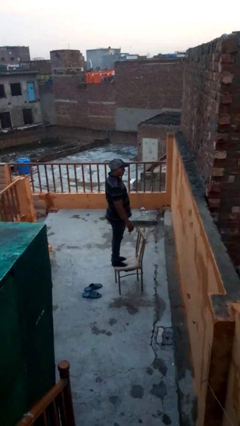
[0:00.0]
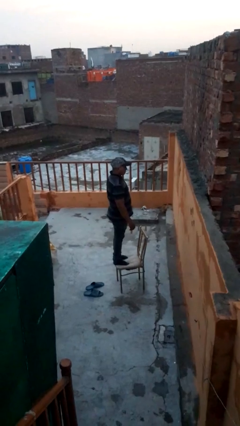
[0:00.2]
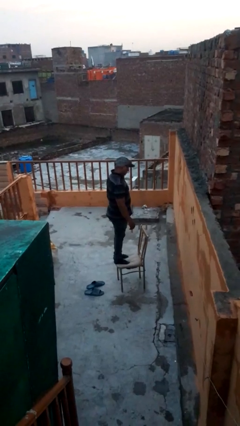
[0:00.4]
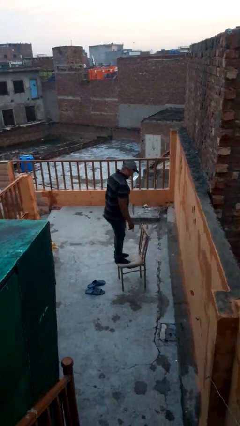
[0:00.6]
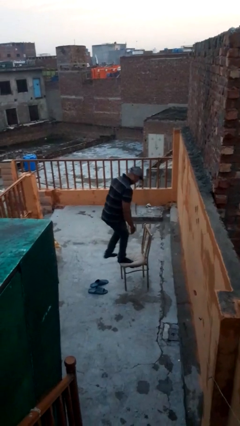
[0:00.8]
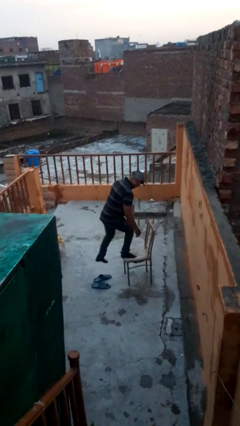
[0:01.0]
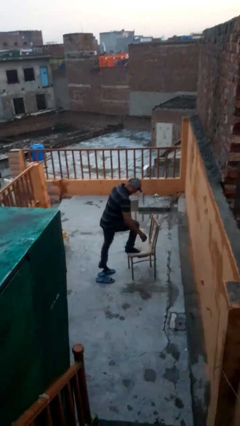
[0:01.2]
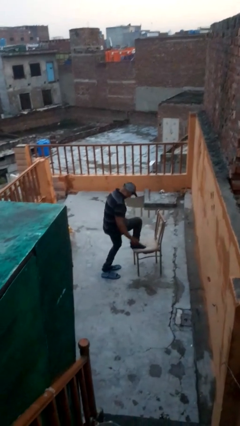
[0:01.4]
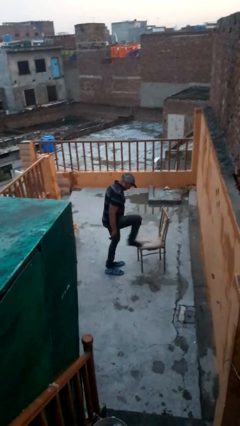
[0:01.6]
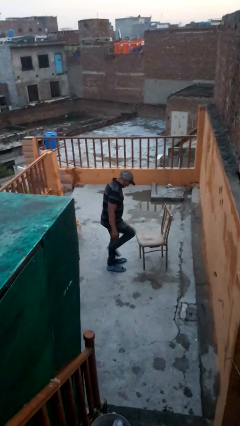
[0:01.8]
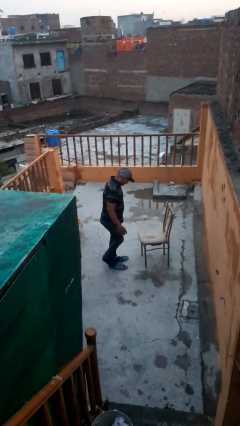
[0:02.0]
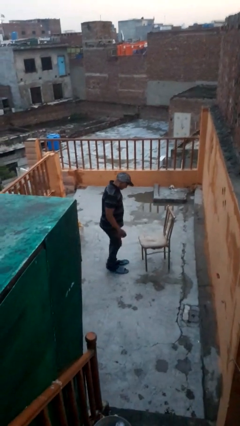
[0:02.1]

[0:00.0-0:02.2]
person climbs off chair

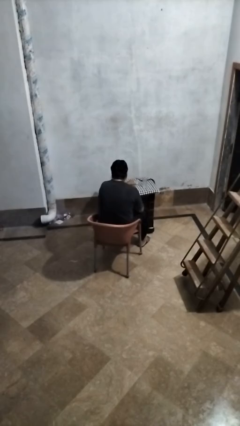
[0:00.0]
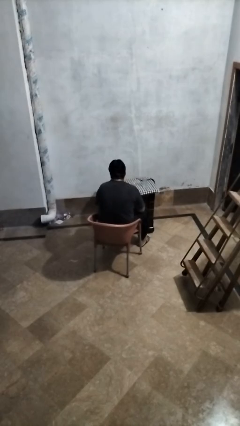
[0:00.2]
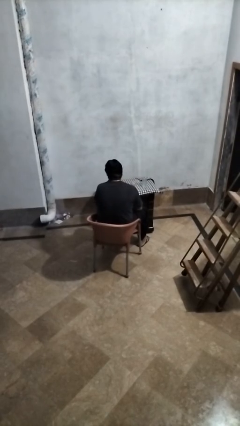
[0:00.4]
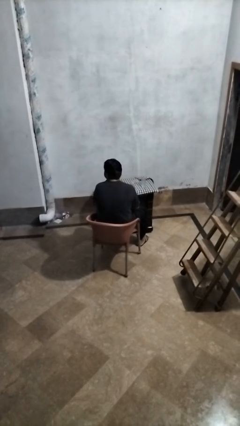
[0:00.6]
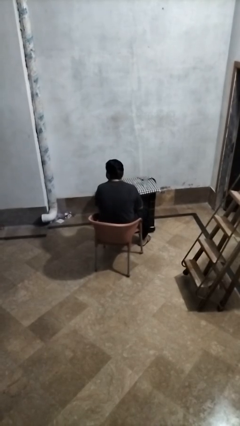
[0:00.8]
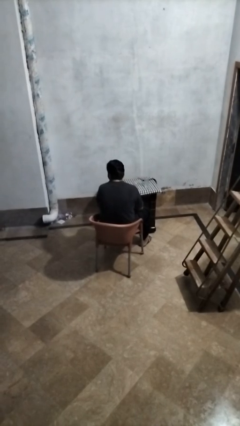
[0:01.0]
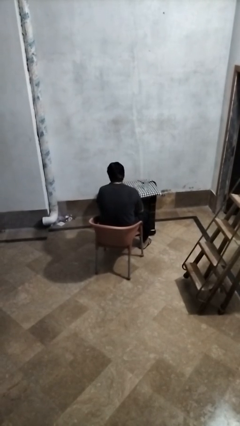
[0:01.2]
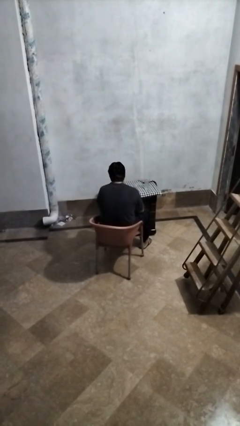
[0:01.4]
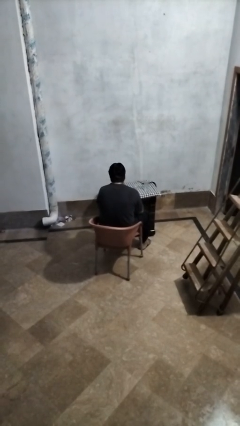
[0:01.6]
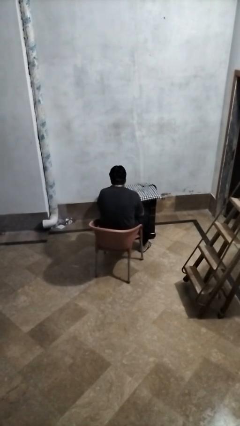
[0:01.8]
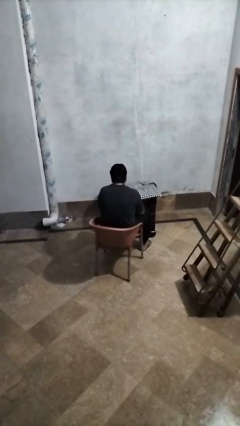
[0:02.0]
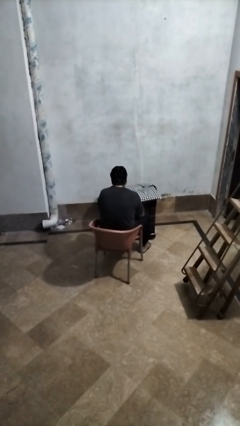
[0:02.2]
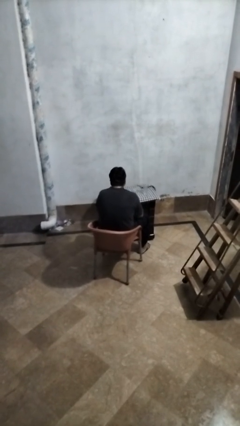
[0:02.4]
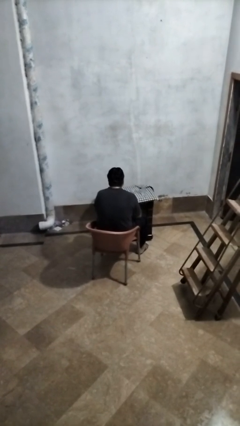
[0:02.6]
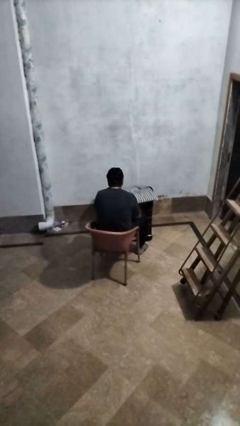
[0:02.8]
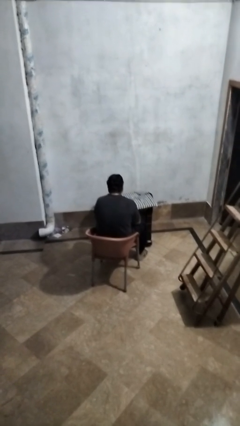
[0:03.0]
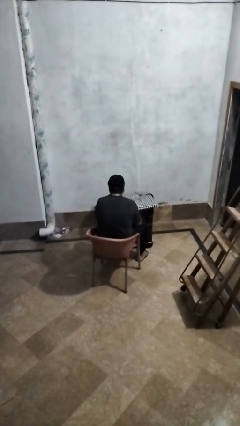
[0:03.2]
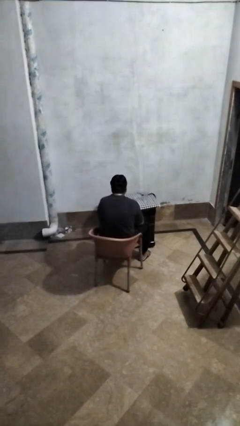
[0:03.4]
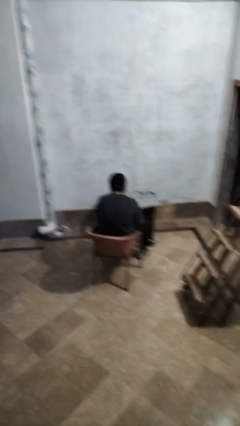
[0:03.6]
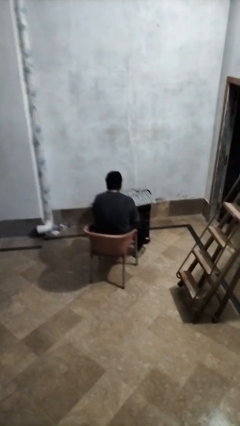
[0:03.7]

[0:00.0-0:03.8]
person knocks over glass

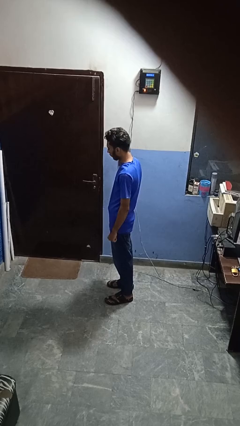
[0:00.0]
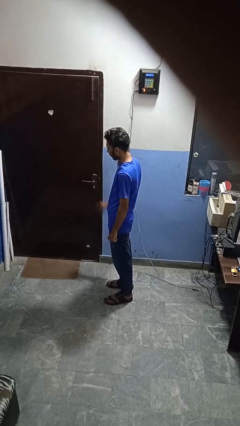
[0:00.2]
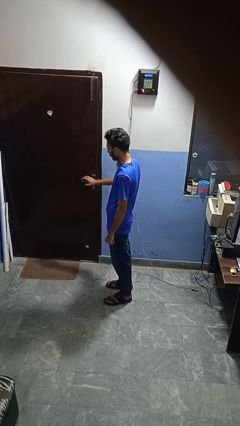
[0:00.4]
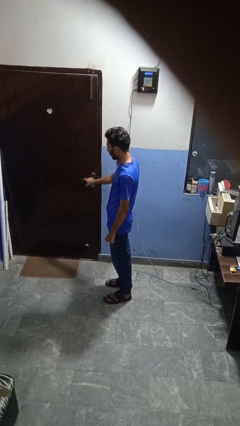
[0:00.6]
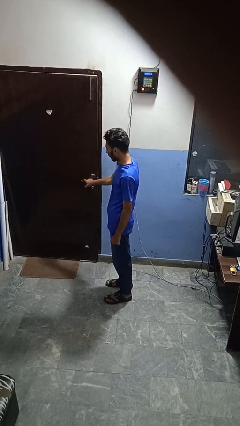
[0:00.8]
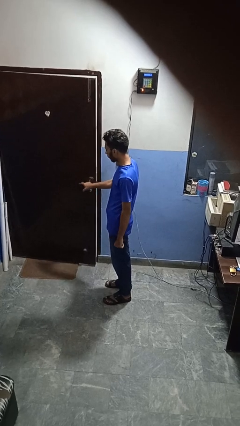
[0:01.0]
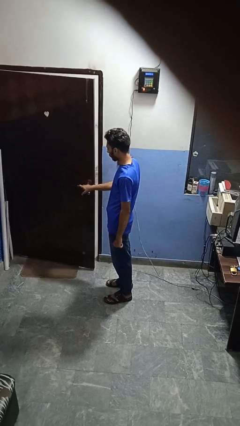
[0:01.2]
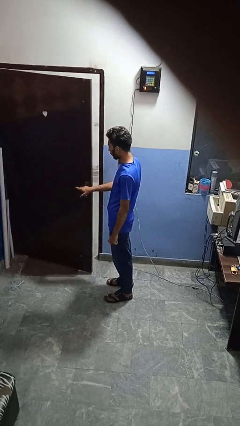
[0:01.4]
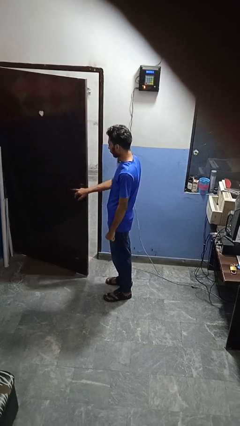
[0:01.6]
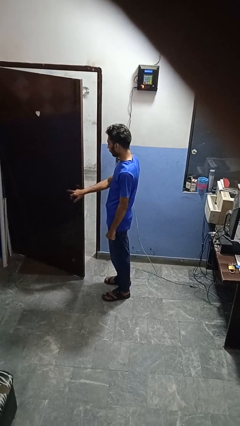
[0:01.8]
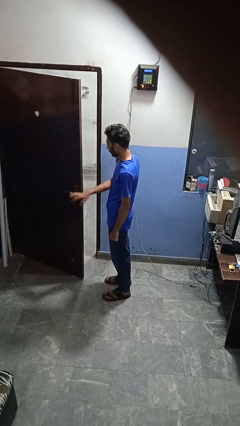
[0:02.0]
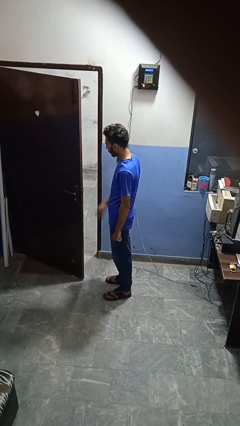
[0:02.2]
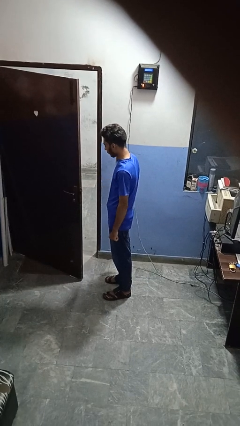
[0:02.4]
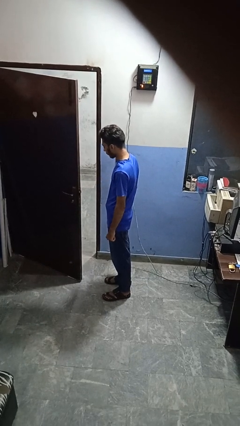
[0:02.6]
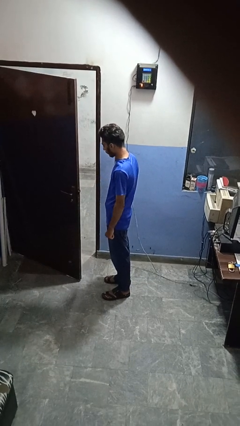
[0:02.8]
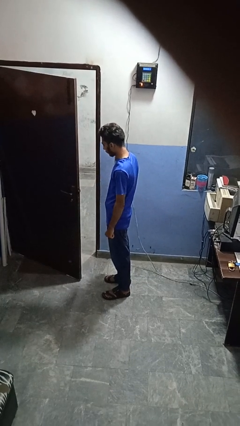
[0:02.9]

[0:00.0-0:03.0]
person opens facility door

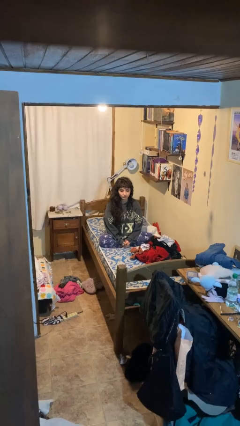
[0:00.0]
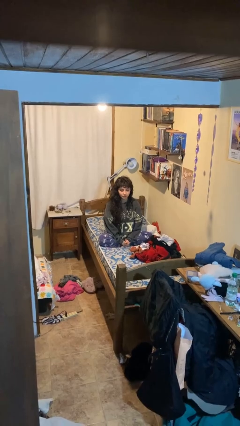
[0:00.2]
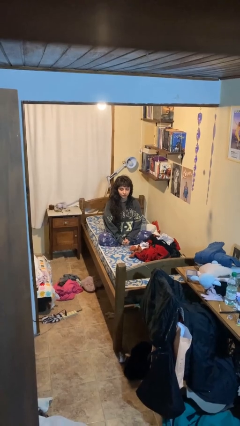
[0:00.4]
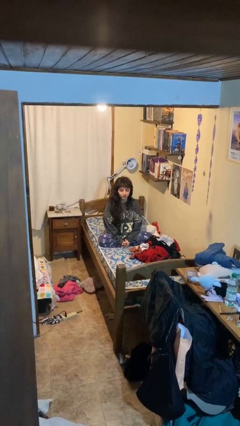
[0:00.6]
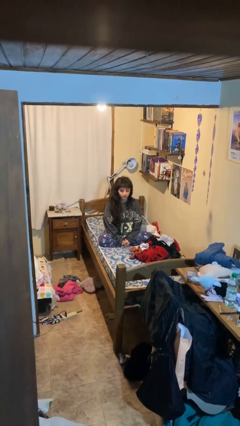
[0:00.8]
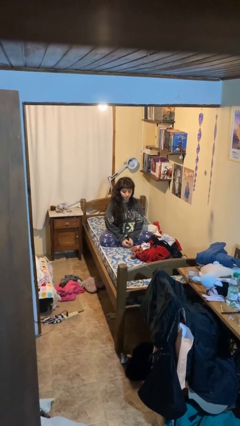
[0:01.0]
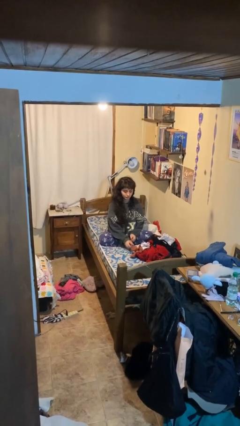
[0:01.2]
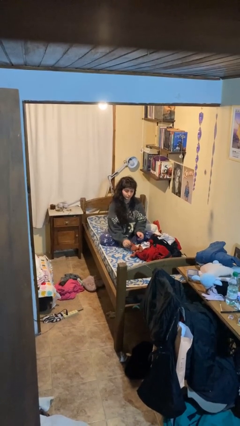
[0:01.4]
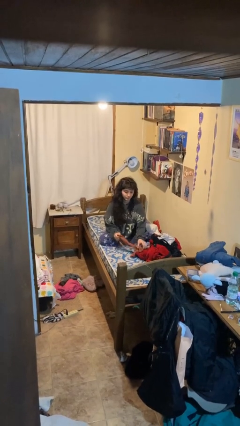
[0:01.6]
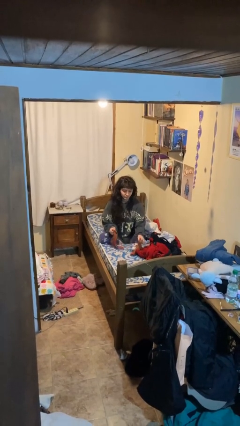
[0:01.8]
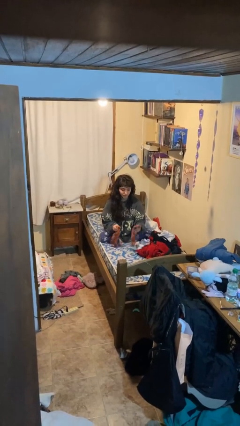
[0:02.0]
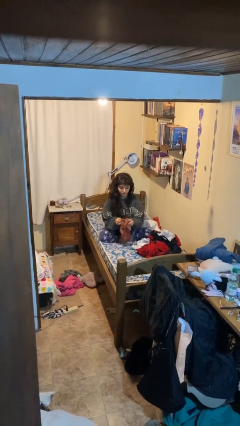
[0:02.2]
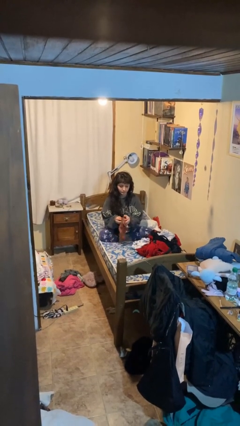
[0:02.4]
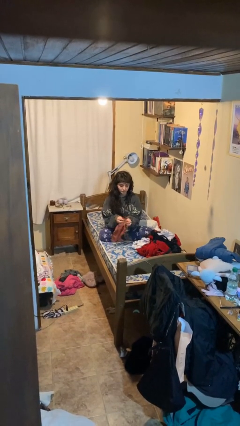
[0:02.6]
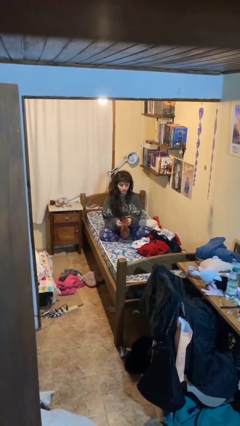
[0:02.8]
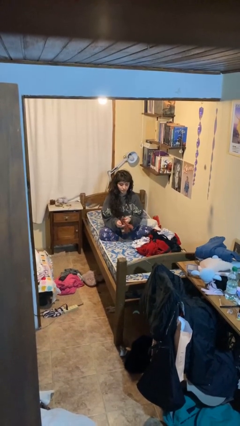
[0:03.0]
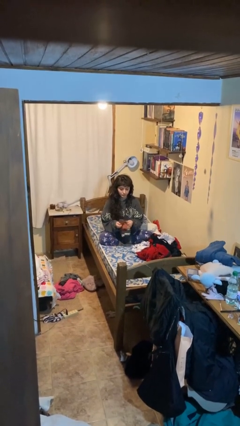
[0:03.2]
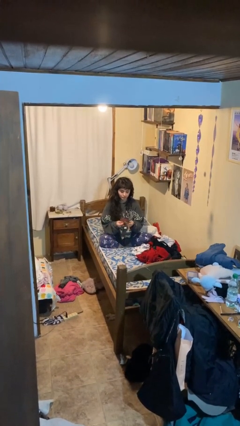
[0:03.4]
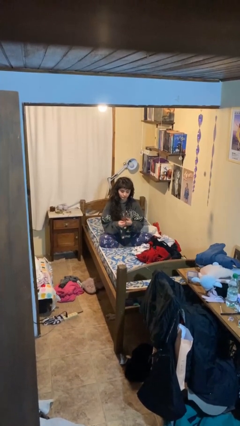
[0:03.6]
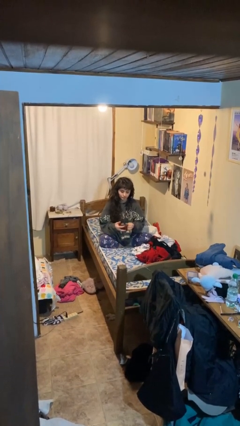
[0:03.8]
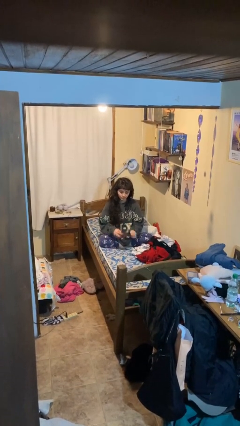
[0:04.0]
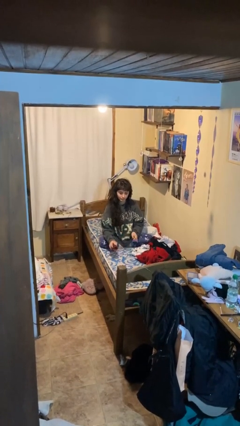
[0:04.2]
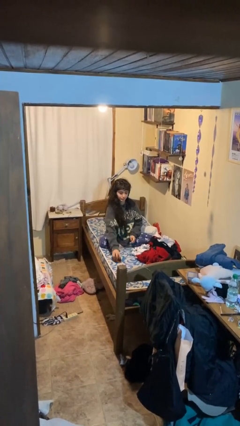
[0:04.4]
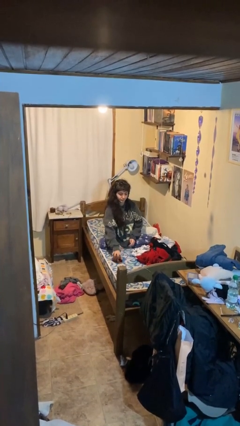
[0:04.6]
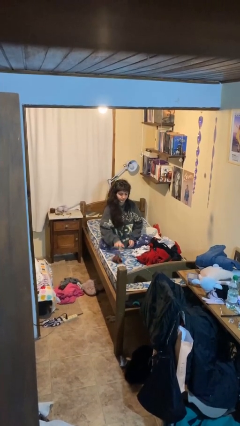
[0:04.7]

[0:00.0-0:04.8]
person folds socks

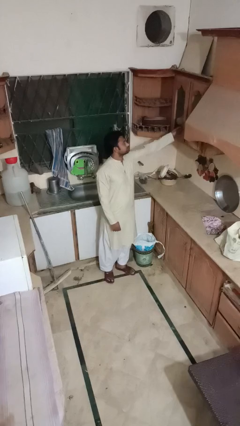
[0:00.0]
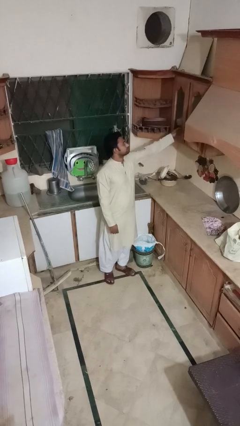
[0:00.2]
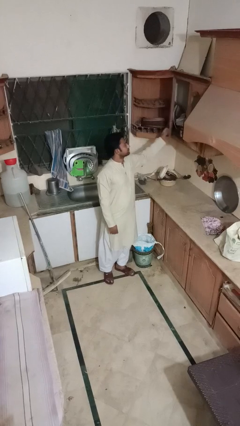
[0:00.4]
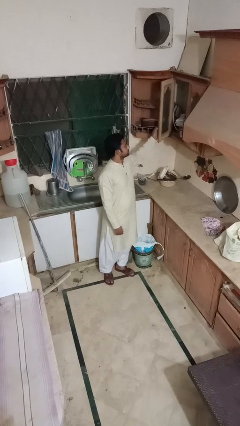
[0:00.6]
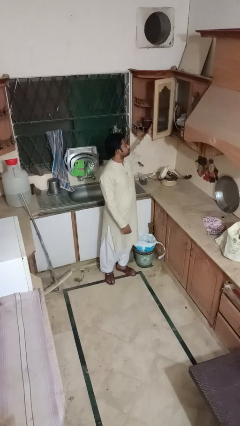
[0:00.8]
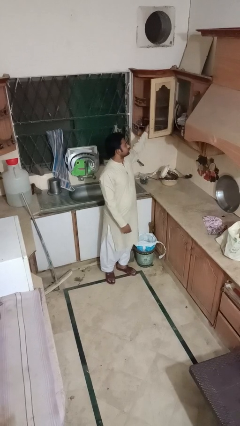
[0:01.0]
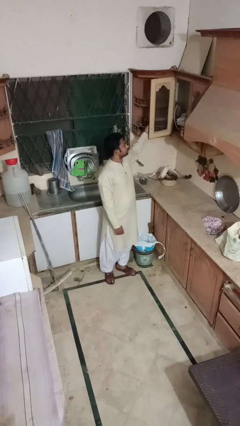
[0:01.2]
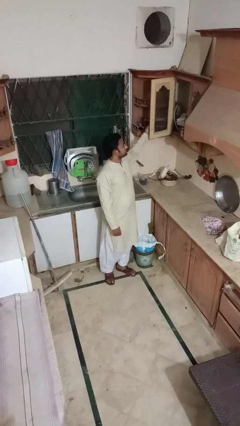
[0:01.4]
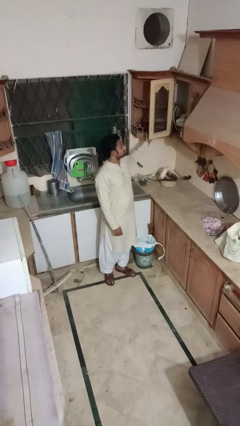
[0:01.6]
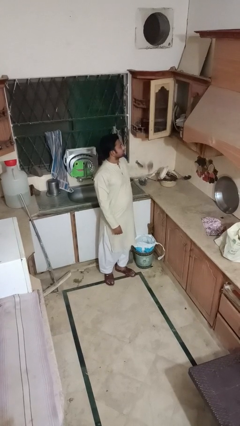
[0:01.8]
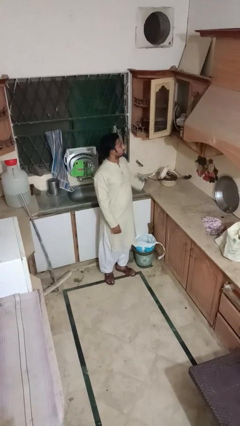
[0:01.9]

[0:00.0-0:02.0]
person opens cabinet

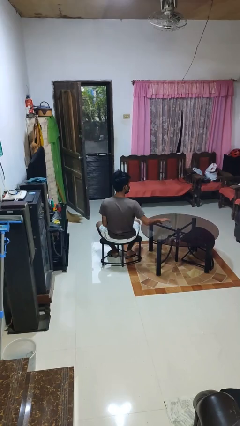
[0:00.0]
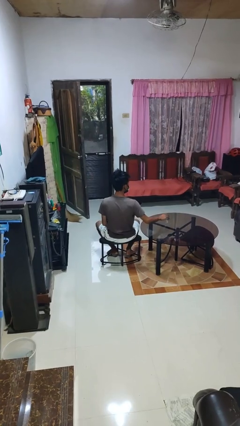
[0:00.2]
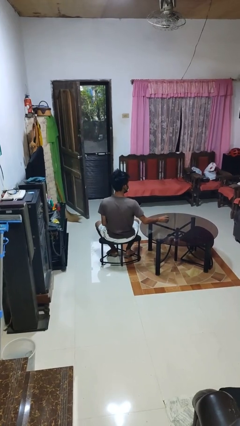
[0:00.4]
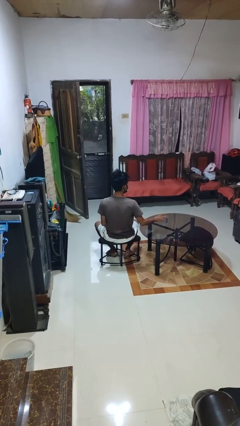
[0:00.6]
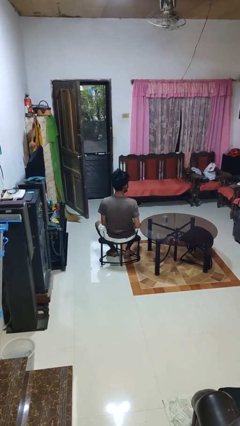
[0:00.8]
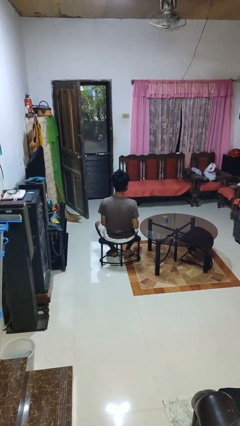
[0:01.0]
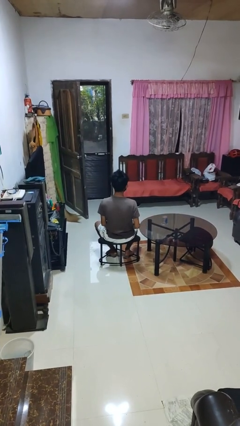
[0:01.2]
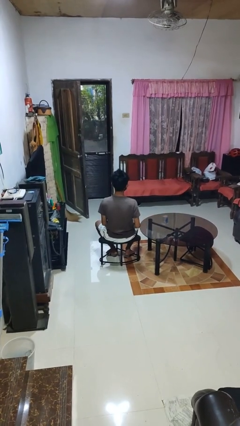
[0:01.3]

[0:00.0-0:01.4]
person sets upright glass
